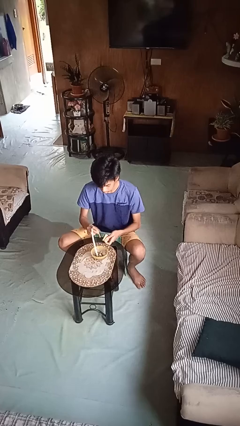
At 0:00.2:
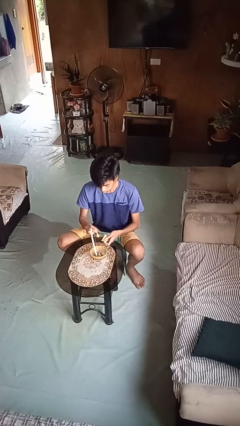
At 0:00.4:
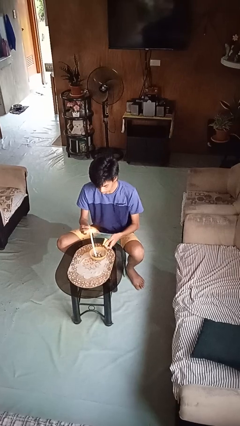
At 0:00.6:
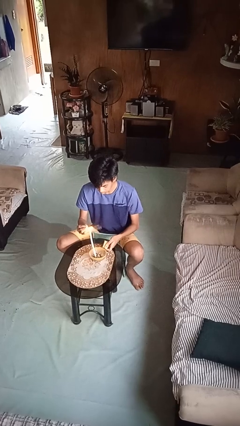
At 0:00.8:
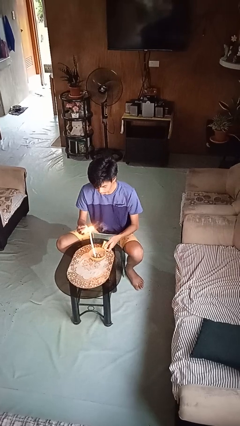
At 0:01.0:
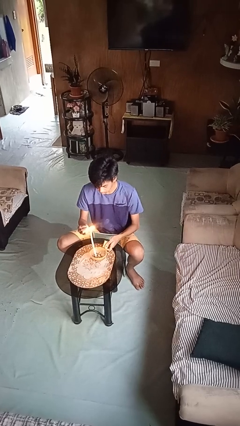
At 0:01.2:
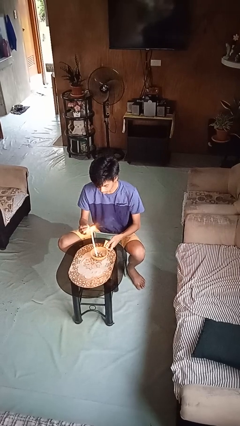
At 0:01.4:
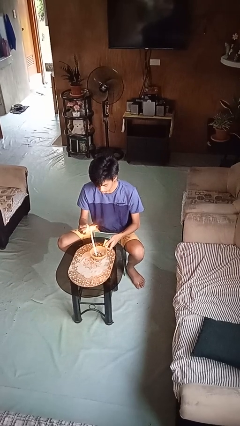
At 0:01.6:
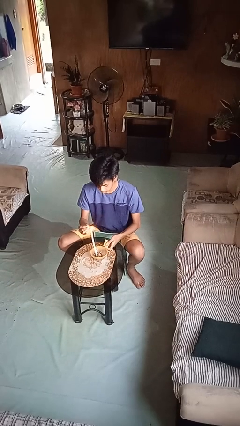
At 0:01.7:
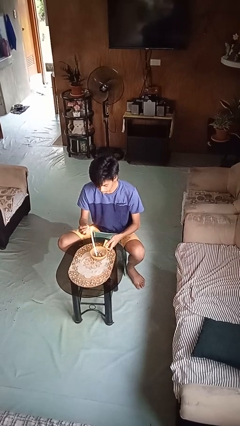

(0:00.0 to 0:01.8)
person lights candle

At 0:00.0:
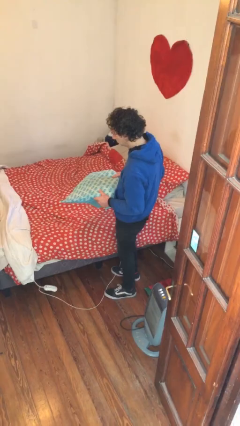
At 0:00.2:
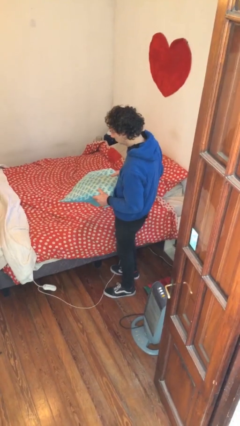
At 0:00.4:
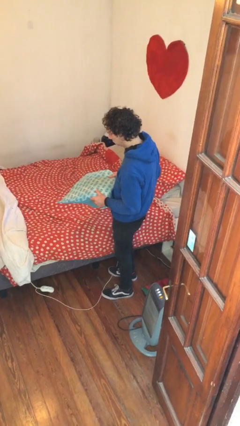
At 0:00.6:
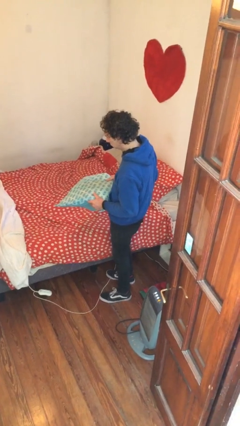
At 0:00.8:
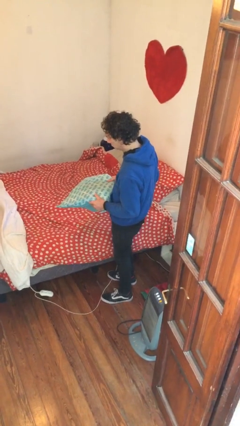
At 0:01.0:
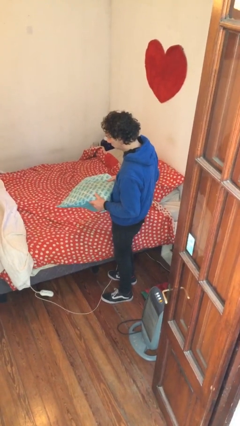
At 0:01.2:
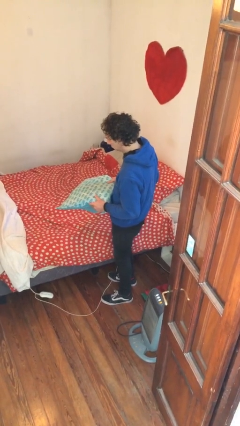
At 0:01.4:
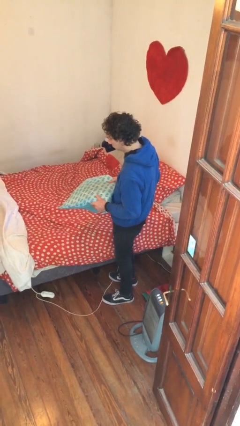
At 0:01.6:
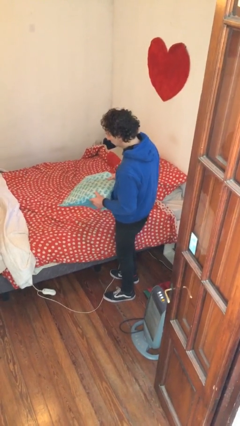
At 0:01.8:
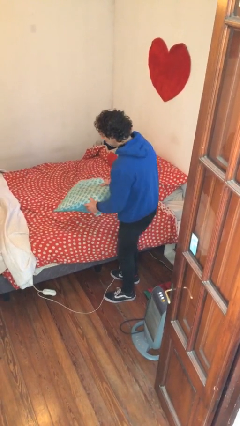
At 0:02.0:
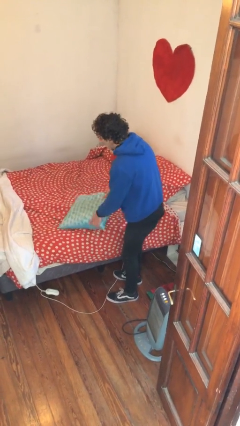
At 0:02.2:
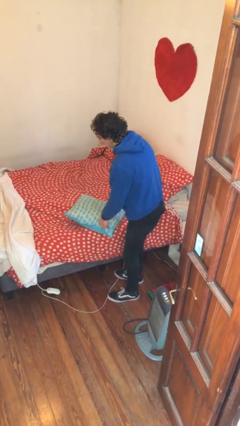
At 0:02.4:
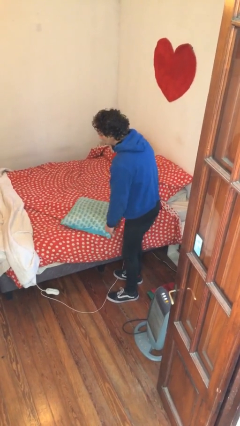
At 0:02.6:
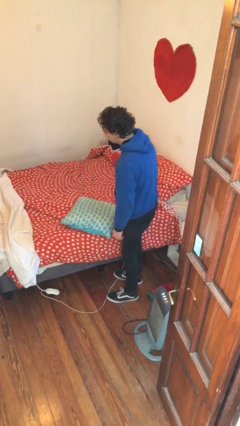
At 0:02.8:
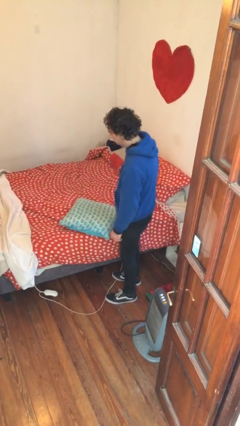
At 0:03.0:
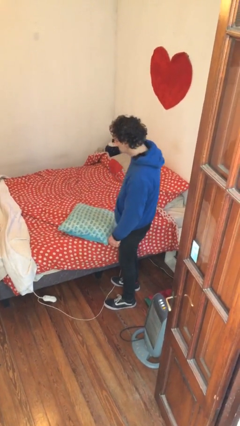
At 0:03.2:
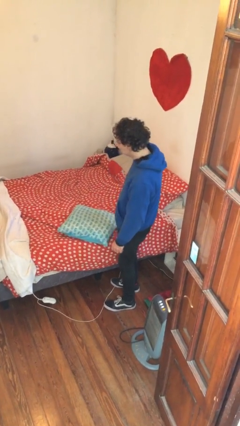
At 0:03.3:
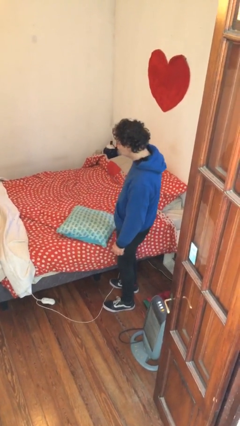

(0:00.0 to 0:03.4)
person puts down object on bed

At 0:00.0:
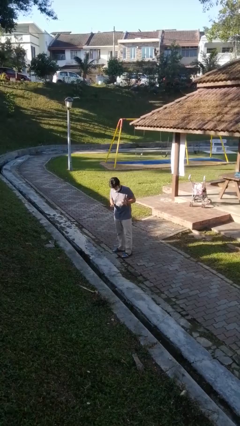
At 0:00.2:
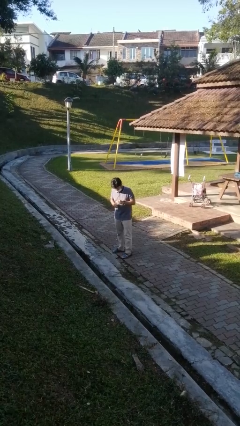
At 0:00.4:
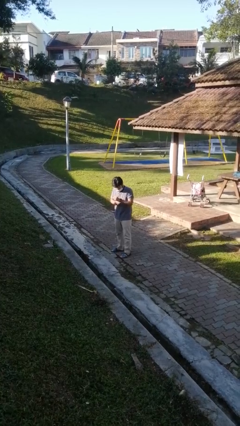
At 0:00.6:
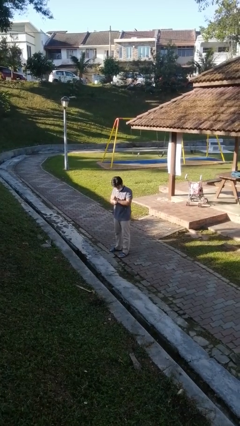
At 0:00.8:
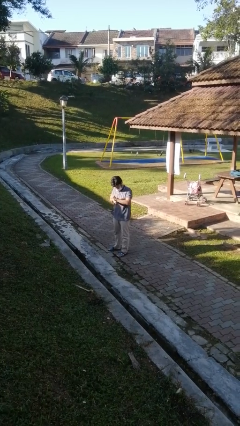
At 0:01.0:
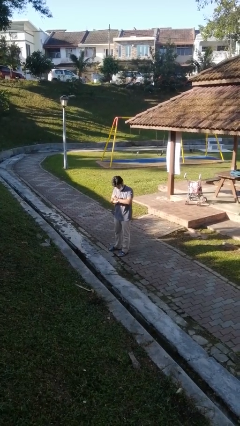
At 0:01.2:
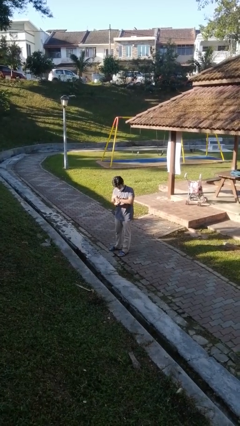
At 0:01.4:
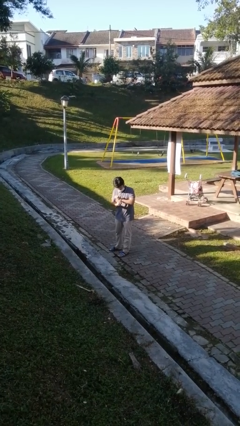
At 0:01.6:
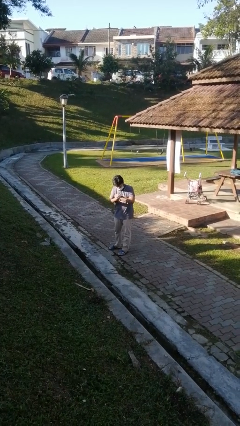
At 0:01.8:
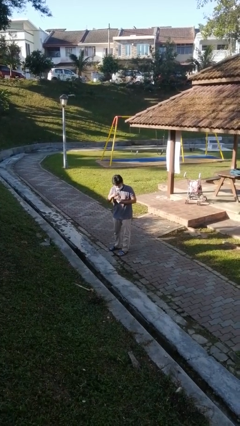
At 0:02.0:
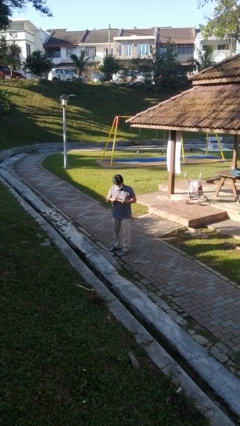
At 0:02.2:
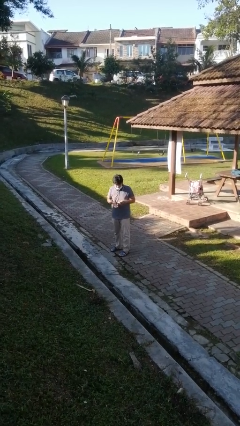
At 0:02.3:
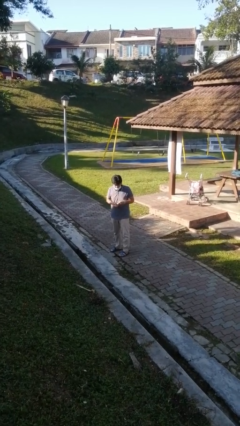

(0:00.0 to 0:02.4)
person takes off wristwatch

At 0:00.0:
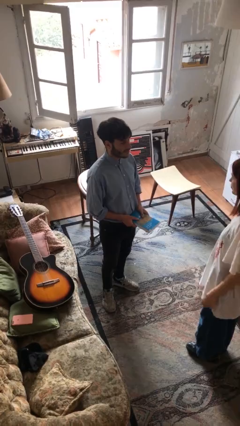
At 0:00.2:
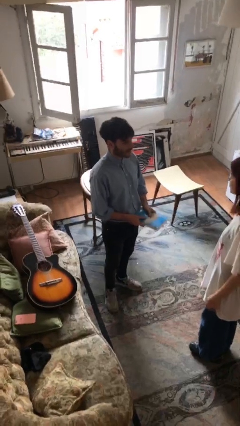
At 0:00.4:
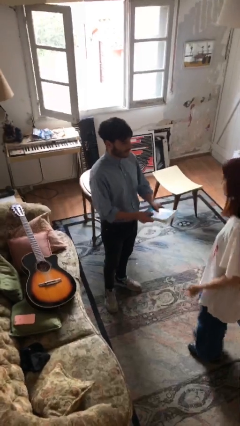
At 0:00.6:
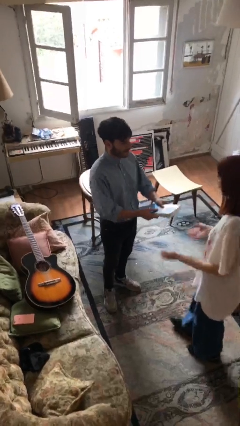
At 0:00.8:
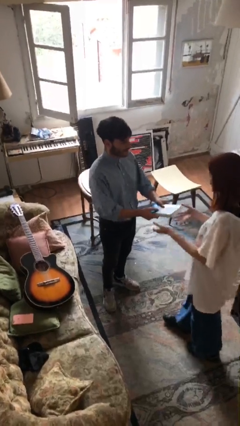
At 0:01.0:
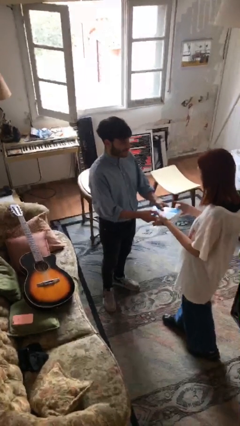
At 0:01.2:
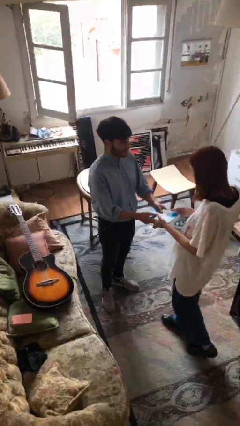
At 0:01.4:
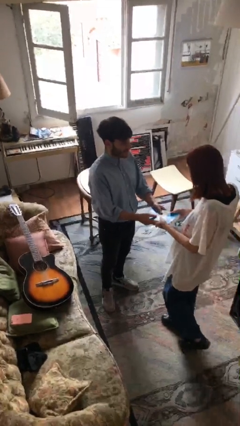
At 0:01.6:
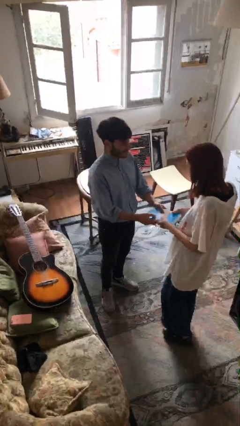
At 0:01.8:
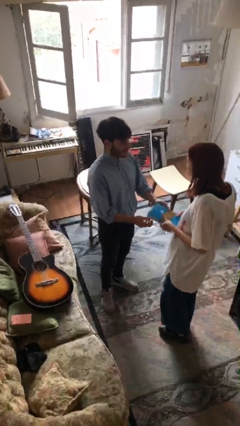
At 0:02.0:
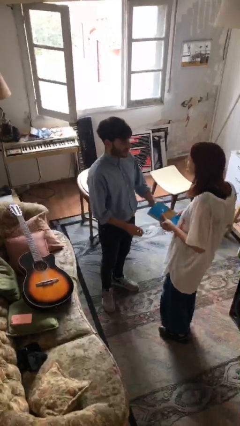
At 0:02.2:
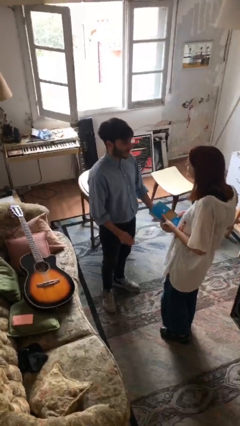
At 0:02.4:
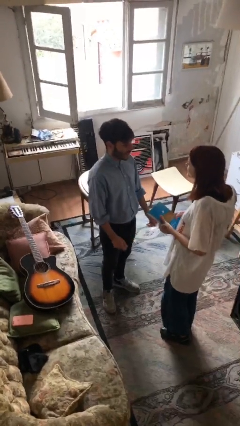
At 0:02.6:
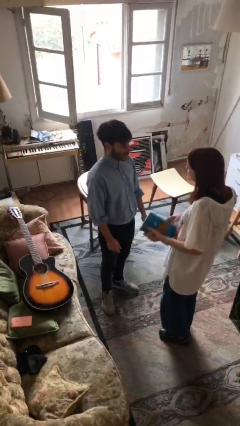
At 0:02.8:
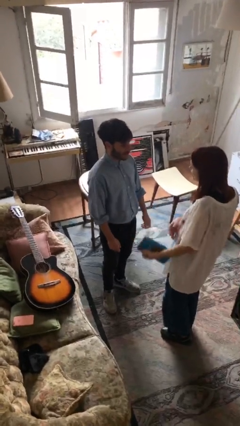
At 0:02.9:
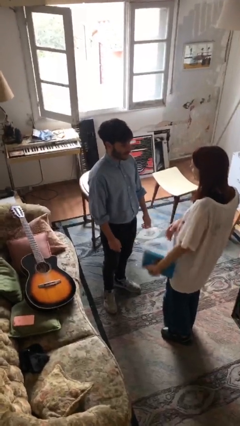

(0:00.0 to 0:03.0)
person transfers object to person

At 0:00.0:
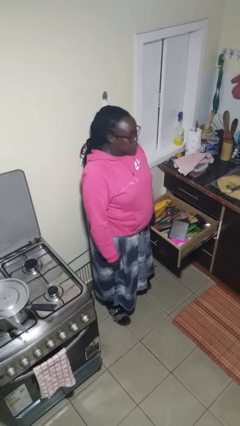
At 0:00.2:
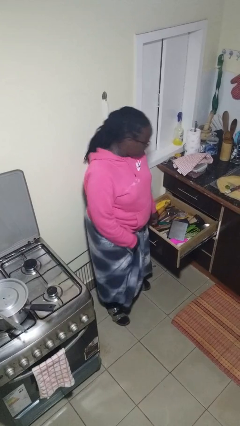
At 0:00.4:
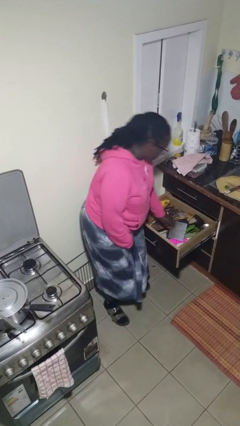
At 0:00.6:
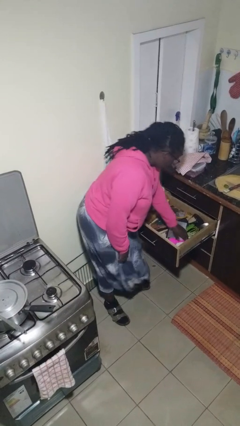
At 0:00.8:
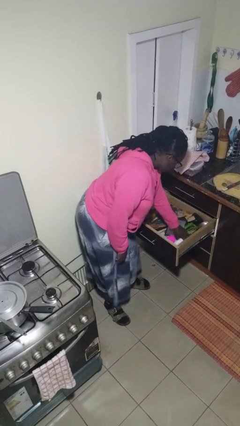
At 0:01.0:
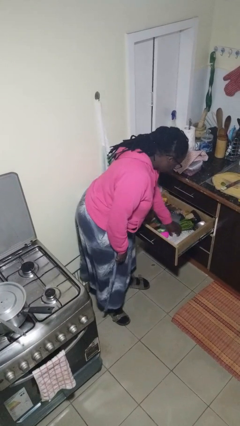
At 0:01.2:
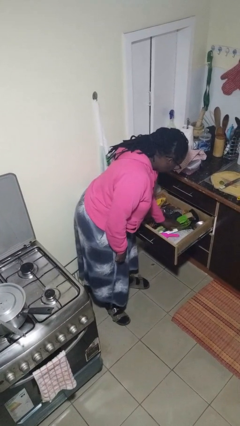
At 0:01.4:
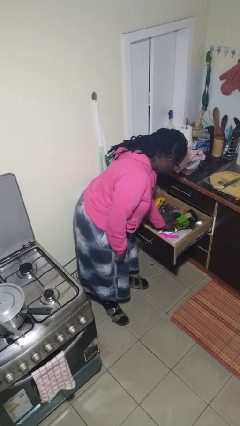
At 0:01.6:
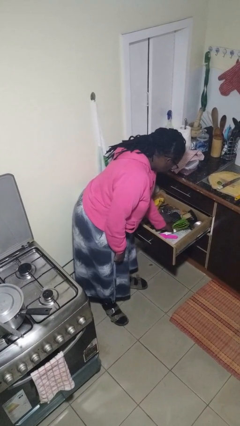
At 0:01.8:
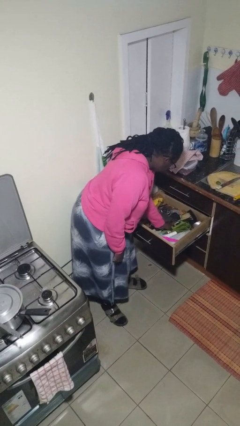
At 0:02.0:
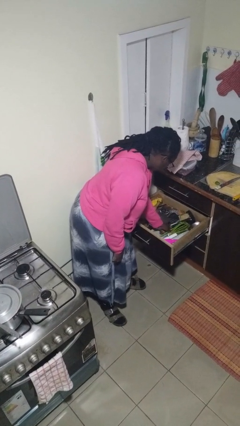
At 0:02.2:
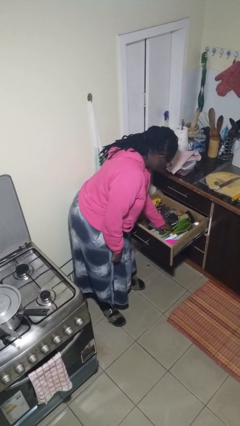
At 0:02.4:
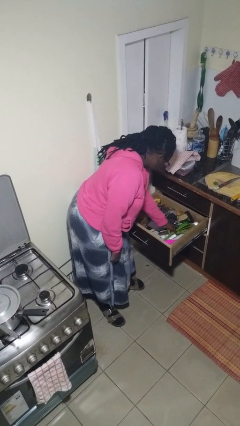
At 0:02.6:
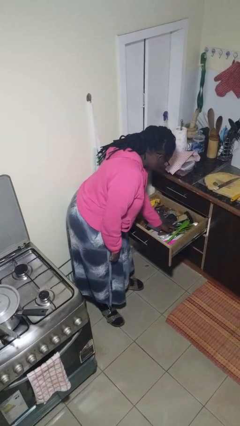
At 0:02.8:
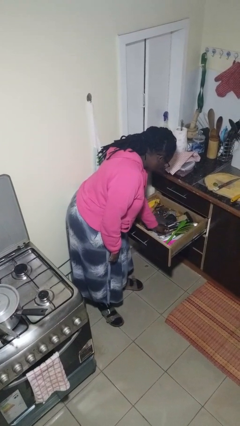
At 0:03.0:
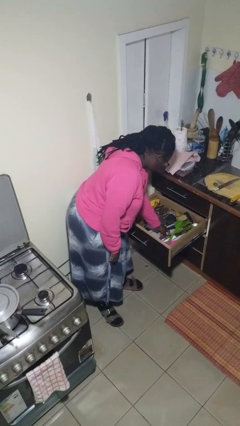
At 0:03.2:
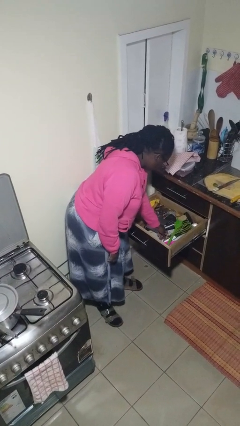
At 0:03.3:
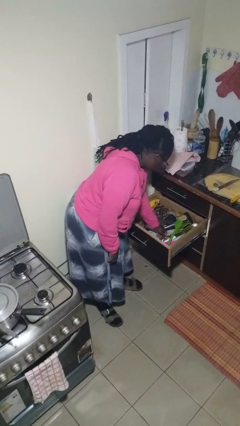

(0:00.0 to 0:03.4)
person searches in kitchen drawer

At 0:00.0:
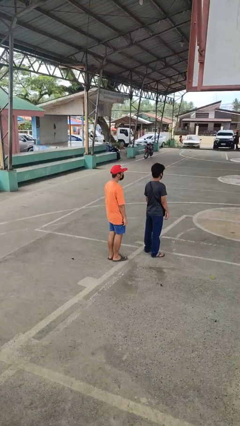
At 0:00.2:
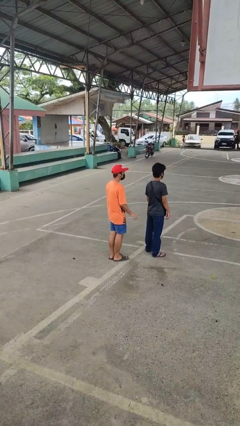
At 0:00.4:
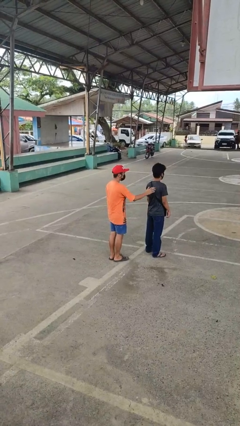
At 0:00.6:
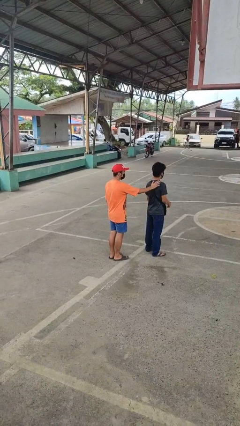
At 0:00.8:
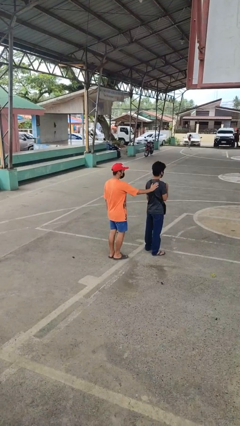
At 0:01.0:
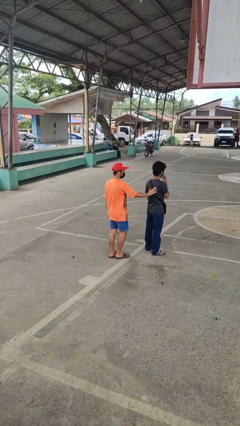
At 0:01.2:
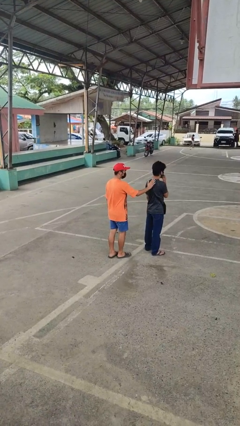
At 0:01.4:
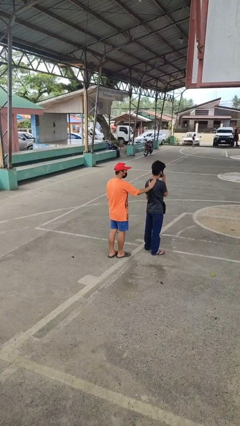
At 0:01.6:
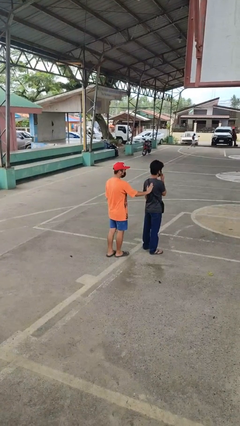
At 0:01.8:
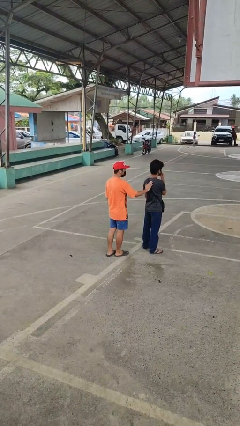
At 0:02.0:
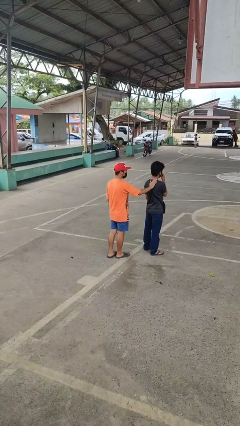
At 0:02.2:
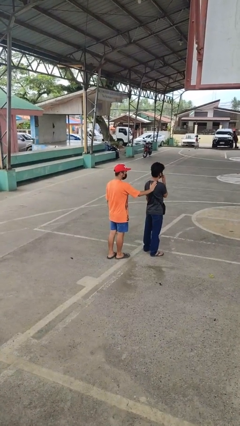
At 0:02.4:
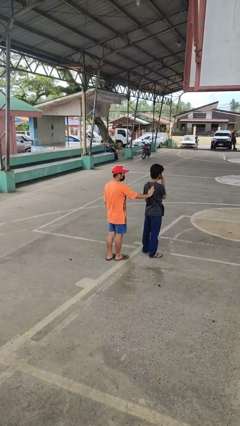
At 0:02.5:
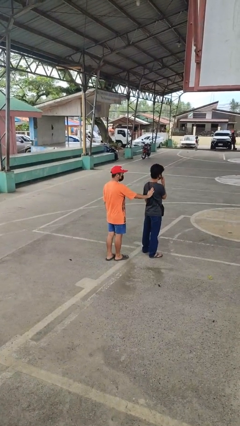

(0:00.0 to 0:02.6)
person touches back of person

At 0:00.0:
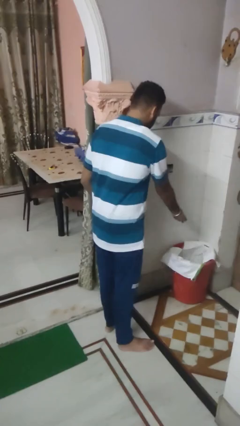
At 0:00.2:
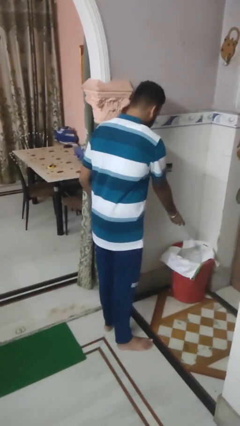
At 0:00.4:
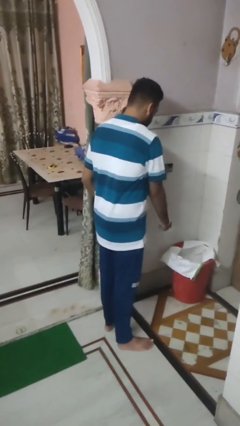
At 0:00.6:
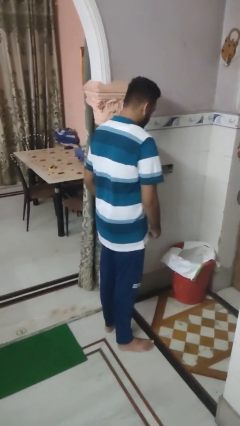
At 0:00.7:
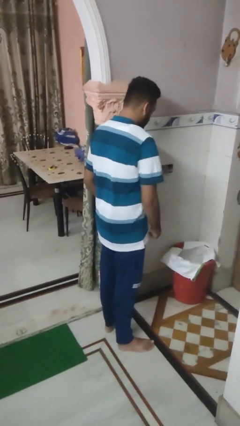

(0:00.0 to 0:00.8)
person discards trash
